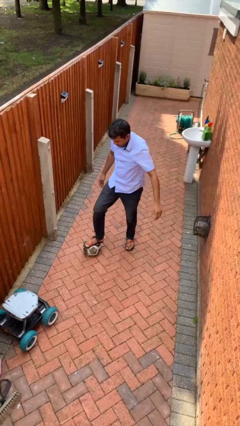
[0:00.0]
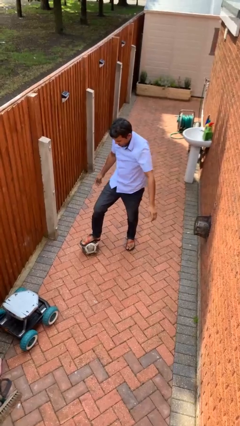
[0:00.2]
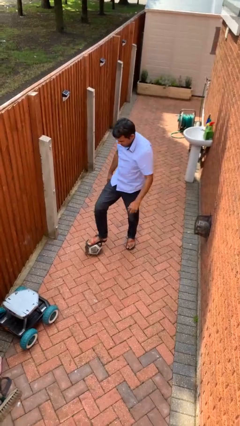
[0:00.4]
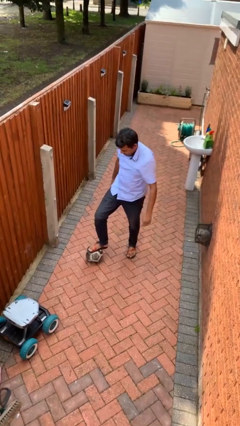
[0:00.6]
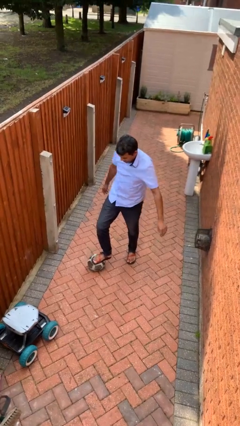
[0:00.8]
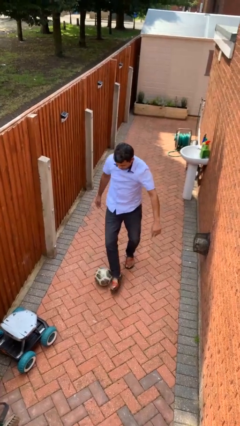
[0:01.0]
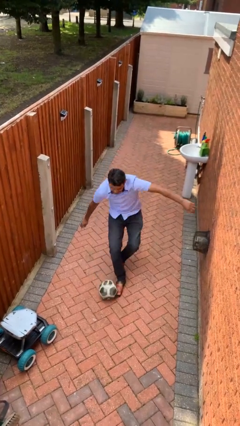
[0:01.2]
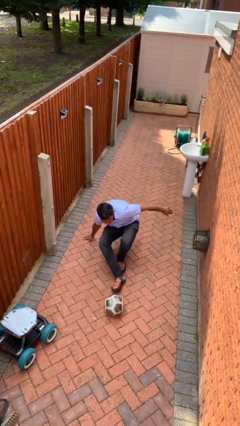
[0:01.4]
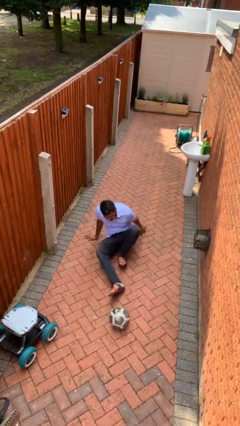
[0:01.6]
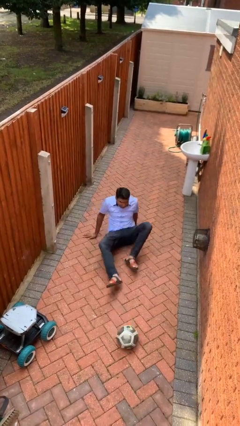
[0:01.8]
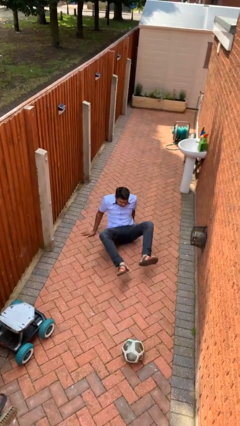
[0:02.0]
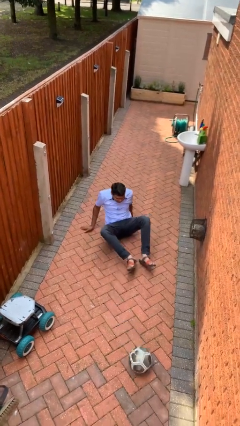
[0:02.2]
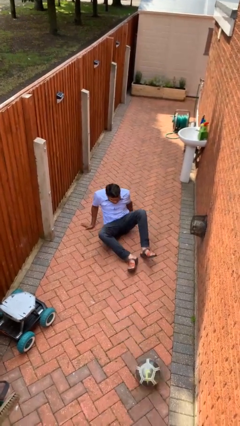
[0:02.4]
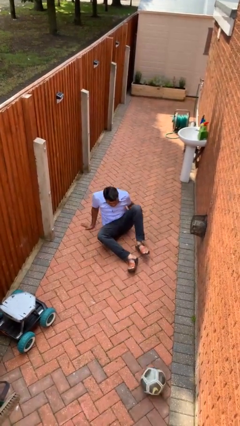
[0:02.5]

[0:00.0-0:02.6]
person trips on object on floor

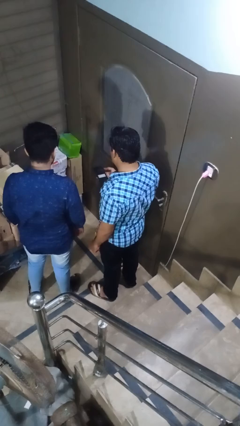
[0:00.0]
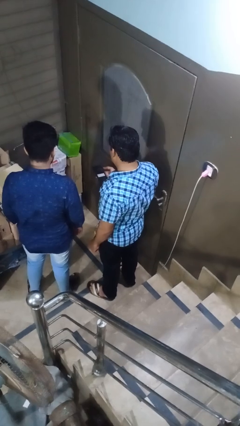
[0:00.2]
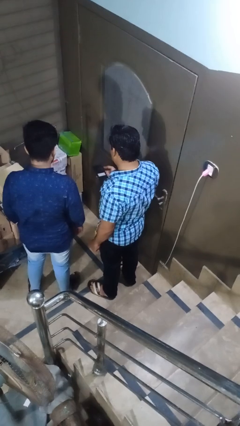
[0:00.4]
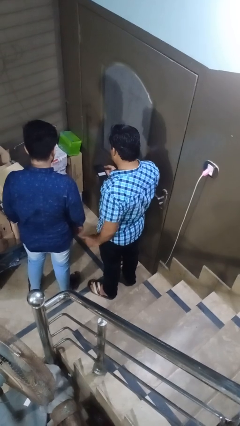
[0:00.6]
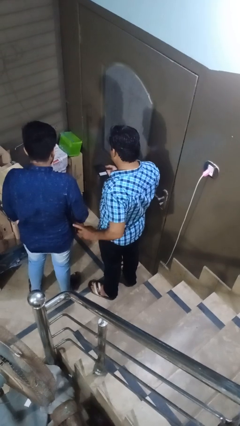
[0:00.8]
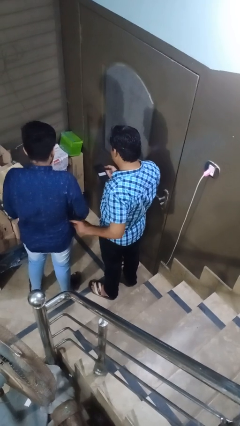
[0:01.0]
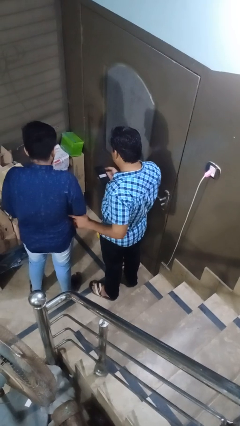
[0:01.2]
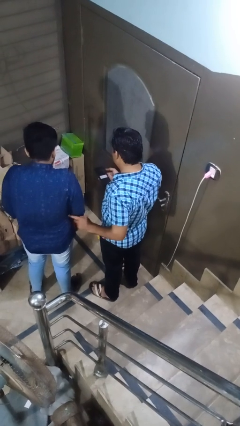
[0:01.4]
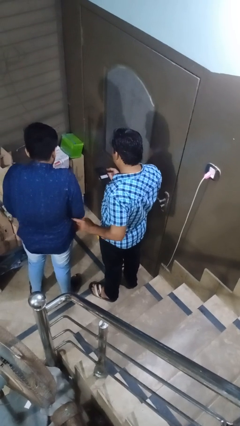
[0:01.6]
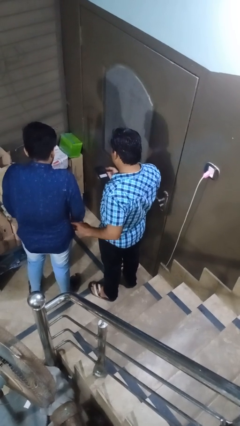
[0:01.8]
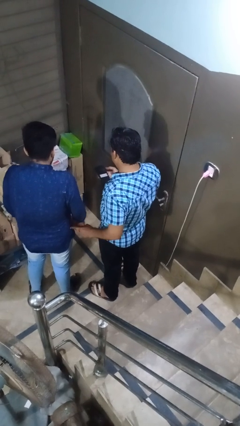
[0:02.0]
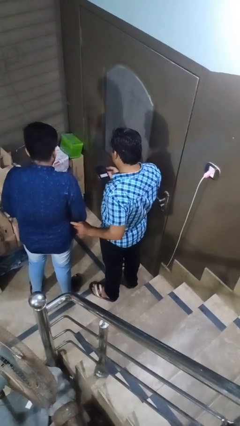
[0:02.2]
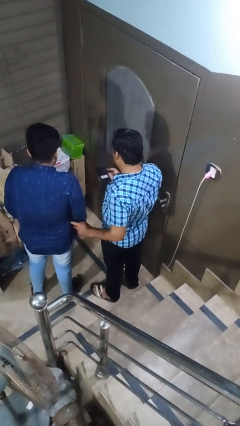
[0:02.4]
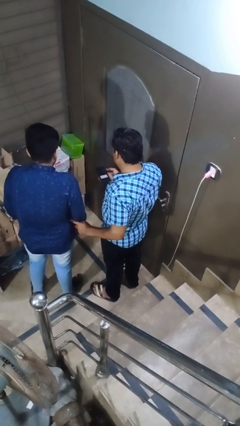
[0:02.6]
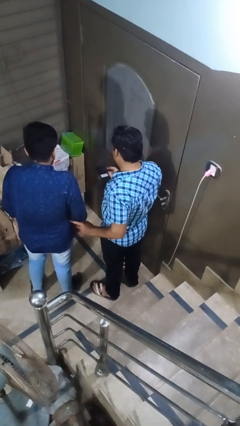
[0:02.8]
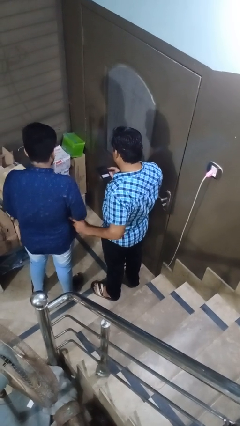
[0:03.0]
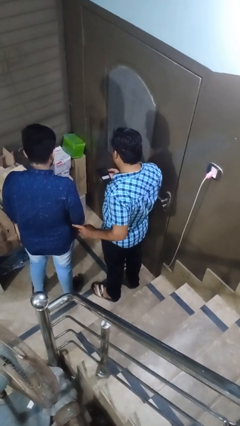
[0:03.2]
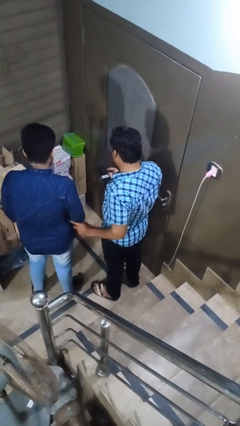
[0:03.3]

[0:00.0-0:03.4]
person tickles person

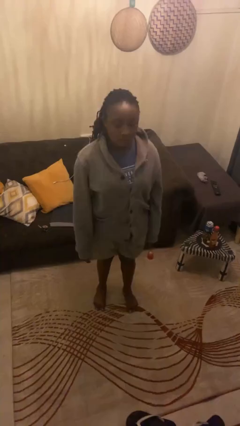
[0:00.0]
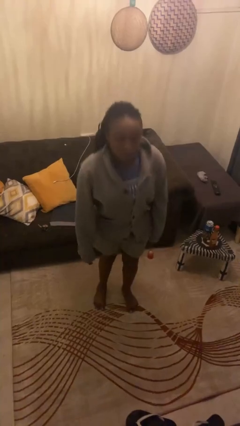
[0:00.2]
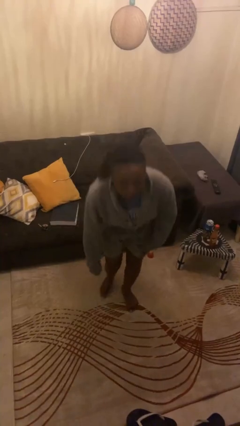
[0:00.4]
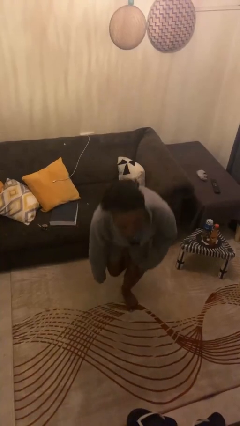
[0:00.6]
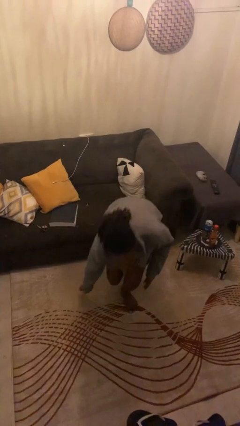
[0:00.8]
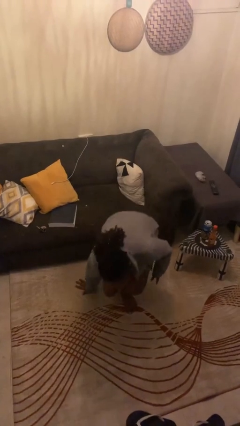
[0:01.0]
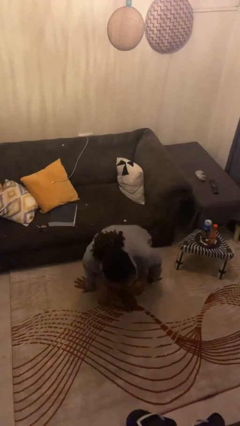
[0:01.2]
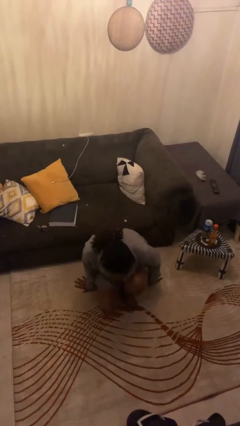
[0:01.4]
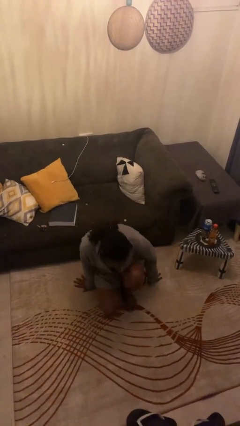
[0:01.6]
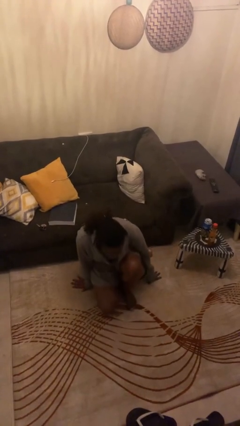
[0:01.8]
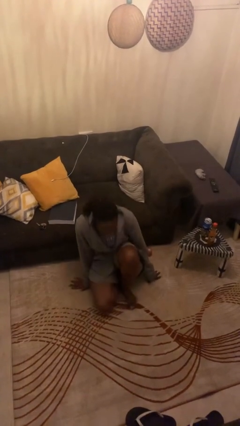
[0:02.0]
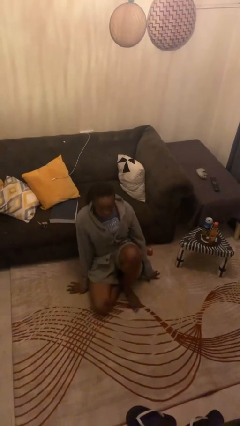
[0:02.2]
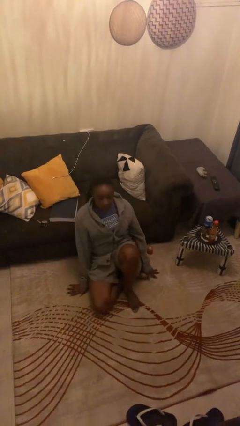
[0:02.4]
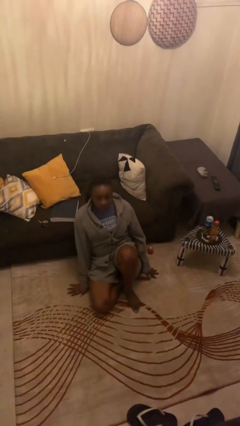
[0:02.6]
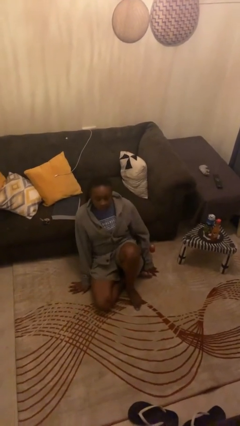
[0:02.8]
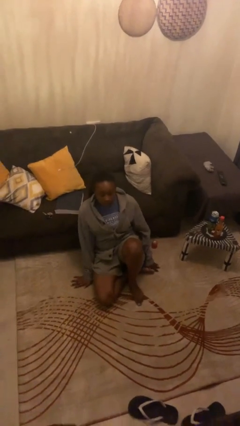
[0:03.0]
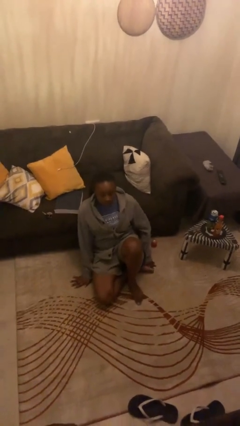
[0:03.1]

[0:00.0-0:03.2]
person sits crisscross

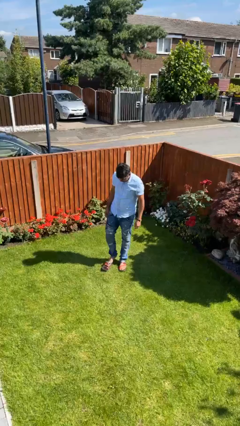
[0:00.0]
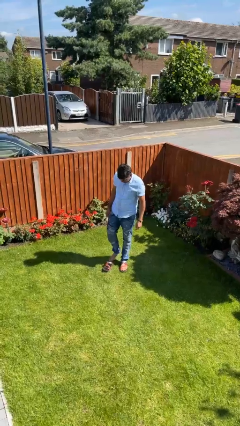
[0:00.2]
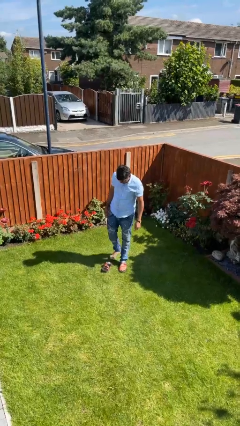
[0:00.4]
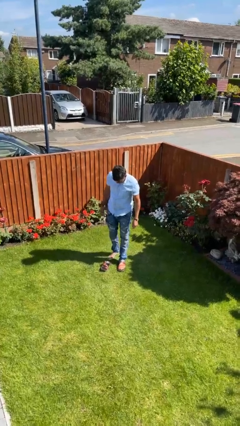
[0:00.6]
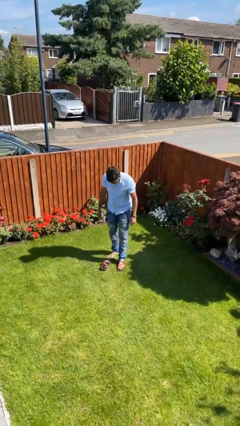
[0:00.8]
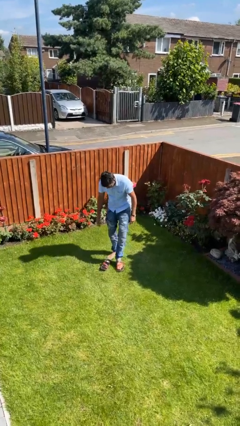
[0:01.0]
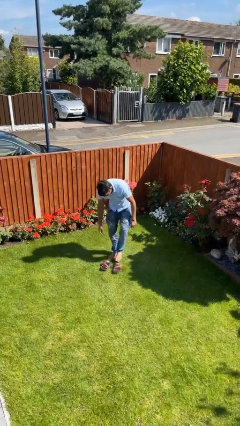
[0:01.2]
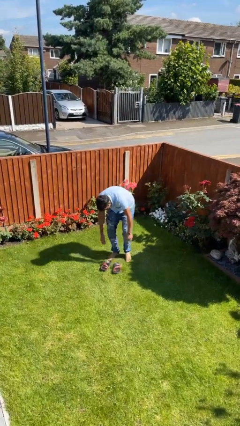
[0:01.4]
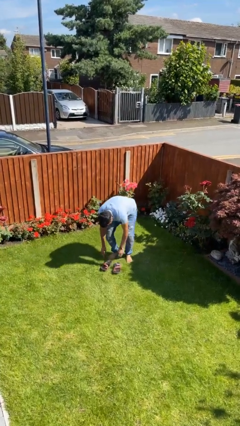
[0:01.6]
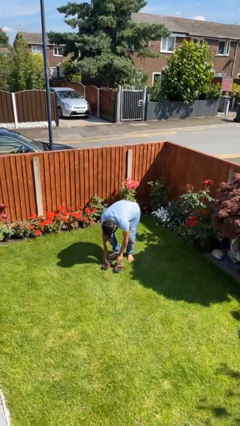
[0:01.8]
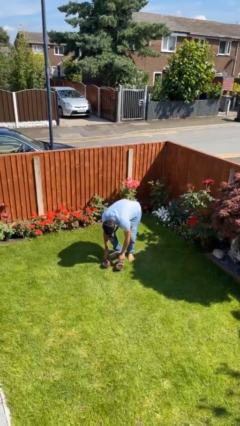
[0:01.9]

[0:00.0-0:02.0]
person takes off shoes

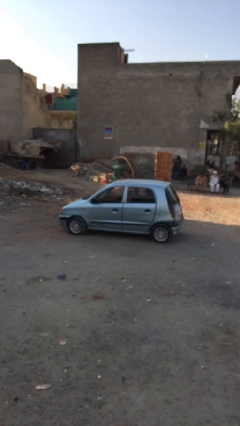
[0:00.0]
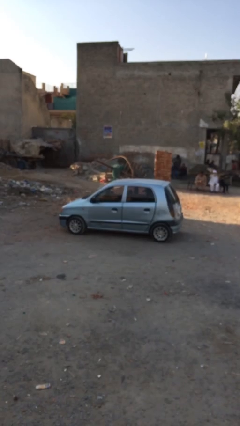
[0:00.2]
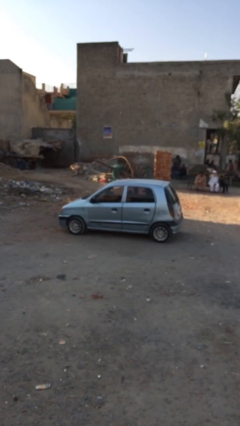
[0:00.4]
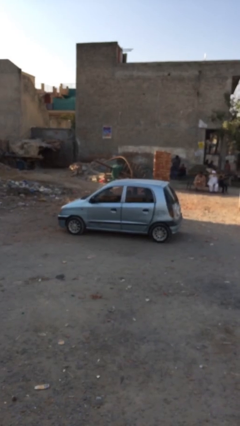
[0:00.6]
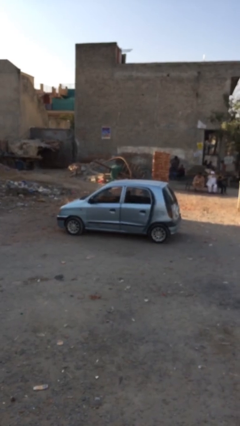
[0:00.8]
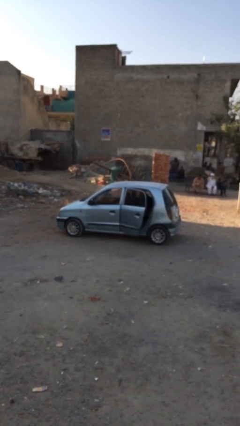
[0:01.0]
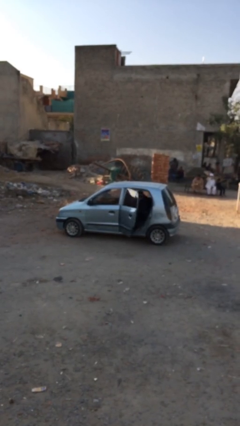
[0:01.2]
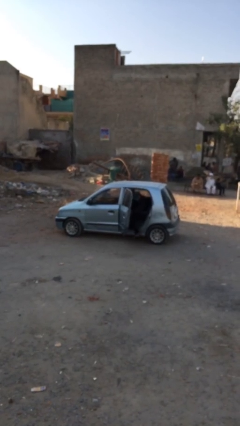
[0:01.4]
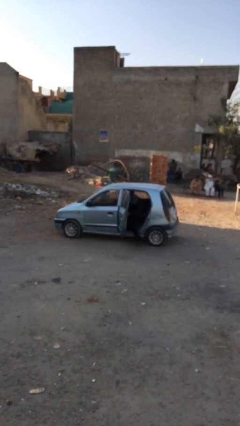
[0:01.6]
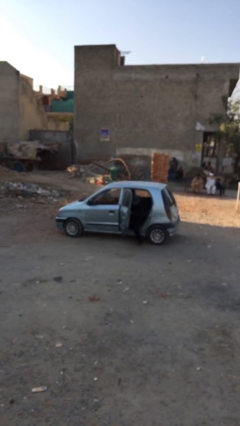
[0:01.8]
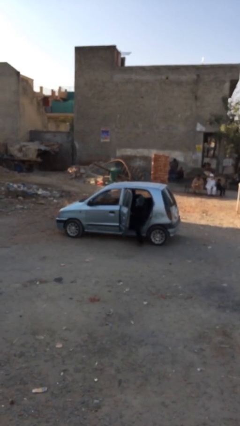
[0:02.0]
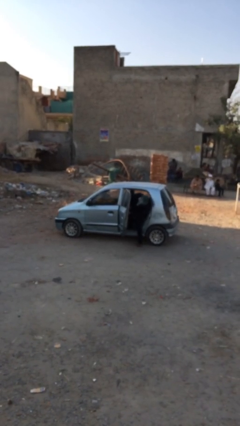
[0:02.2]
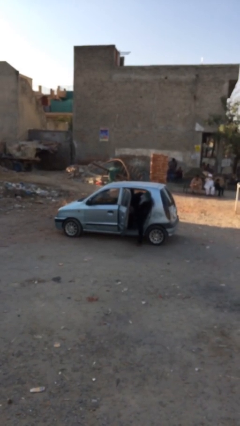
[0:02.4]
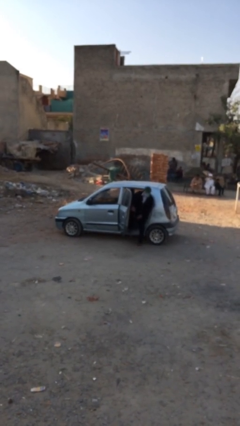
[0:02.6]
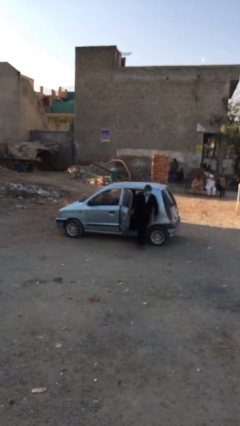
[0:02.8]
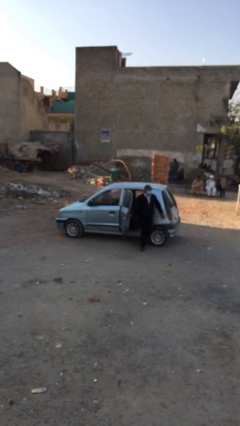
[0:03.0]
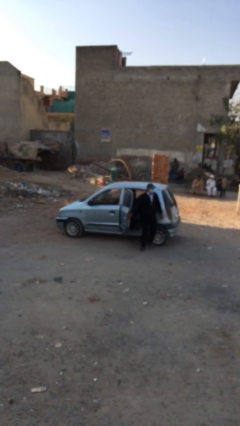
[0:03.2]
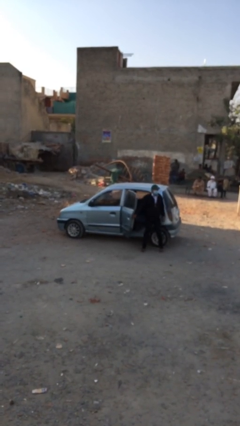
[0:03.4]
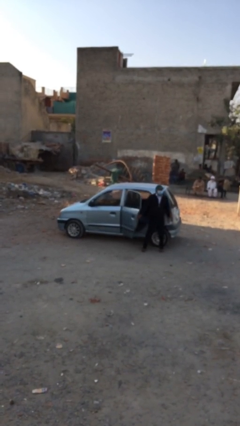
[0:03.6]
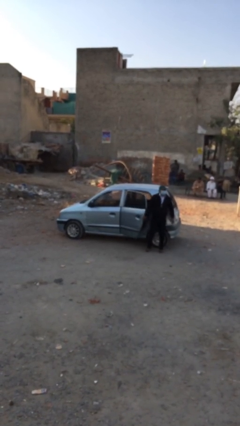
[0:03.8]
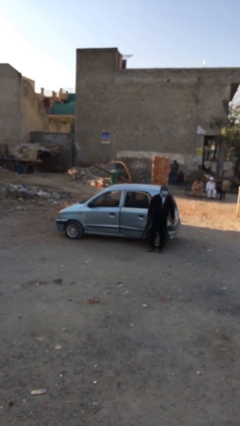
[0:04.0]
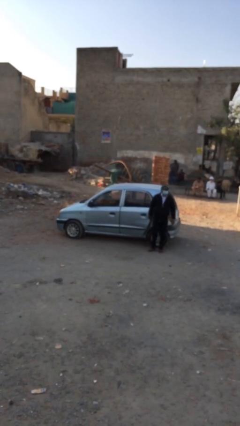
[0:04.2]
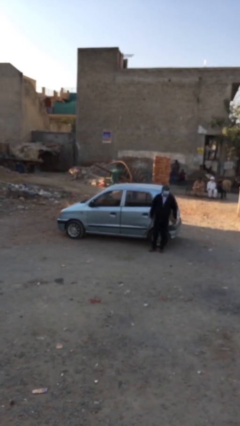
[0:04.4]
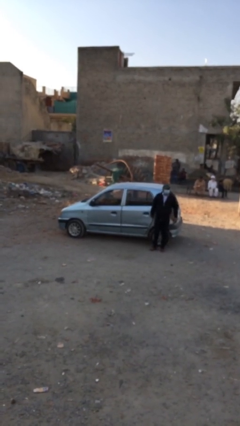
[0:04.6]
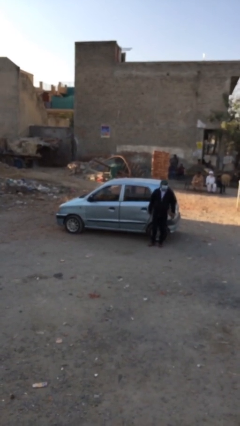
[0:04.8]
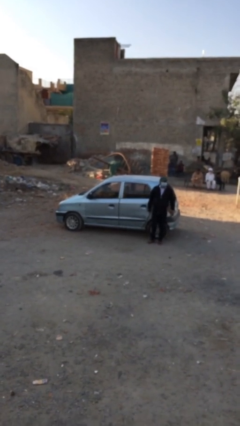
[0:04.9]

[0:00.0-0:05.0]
car drops off person

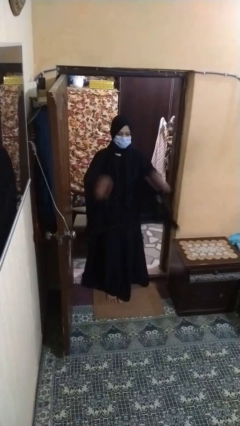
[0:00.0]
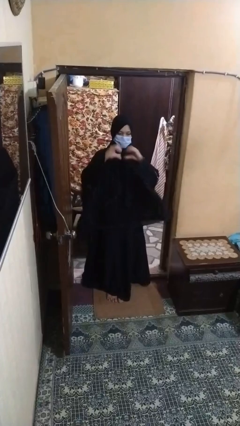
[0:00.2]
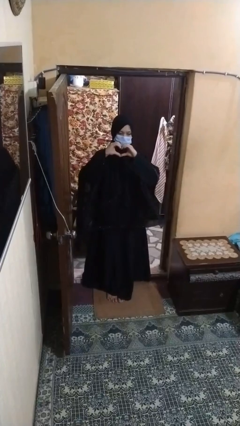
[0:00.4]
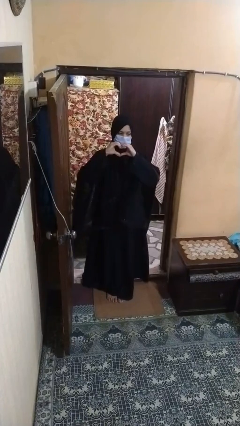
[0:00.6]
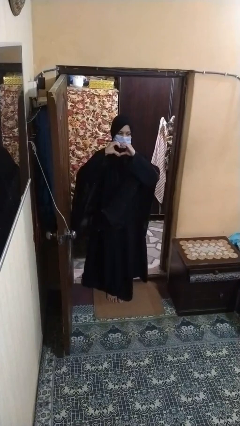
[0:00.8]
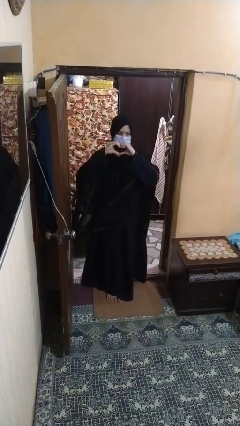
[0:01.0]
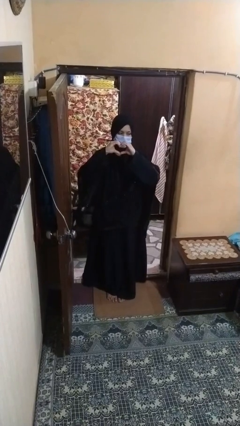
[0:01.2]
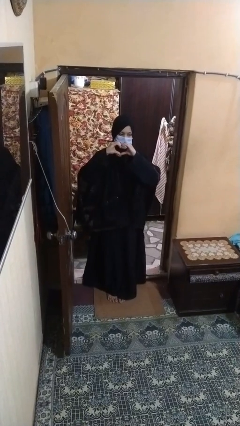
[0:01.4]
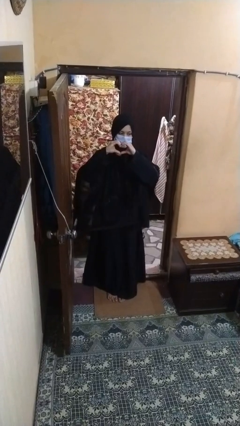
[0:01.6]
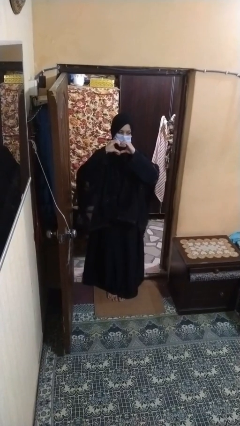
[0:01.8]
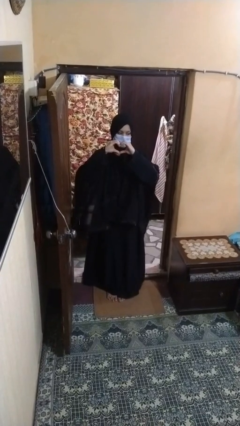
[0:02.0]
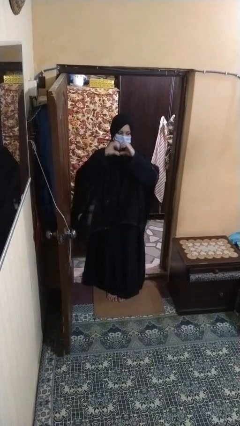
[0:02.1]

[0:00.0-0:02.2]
person gestures heart
